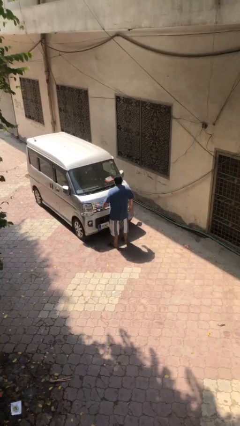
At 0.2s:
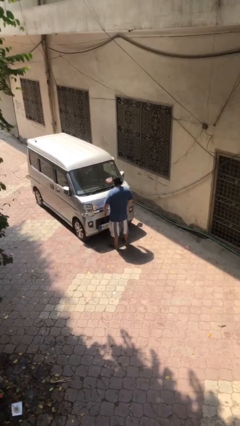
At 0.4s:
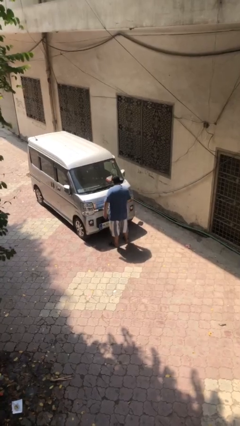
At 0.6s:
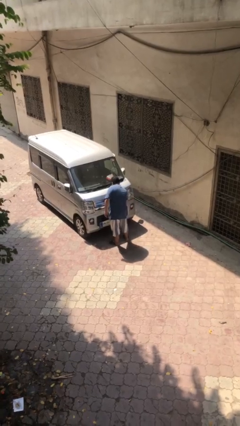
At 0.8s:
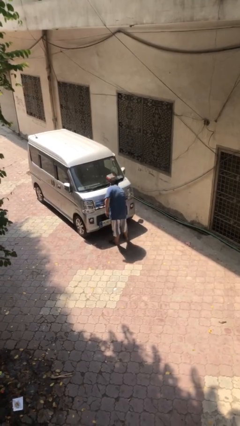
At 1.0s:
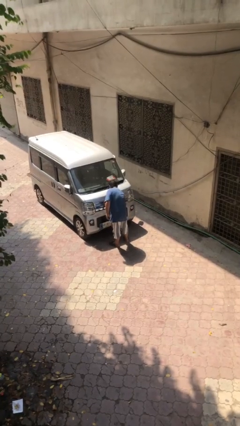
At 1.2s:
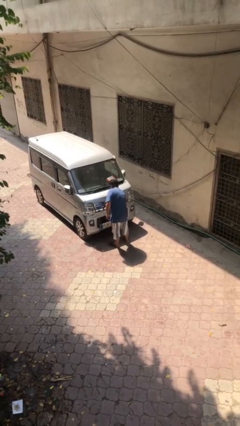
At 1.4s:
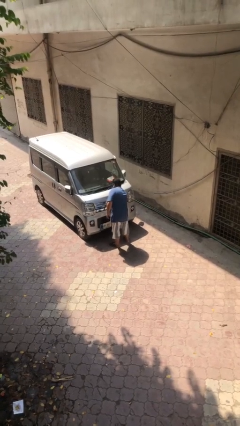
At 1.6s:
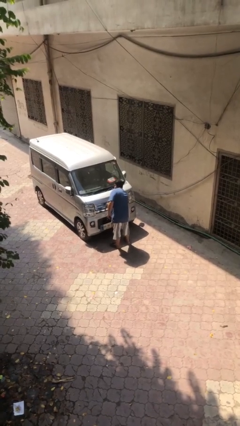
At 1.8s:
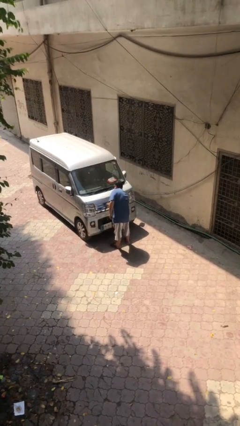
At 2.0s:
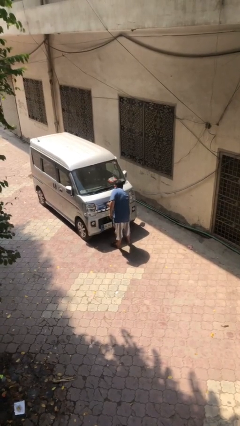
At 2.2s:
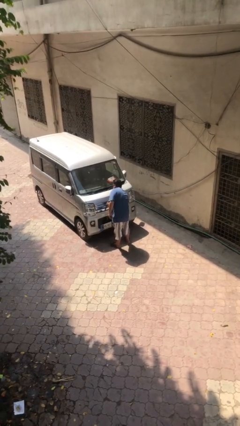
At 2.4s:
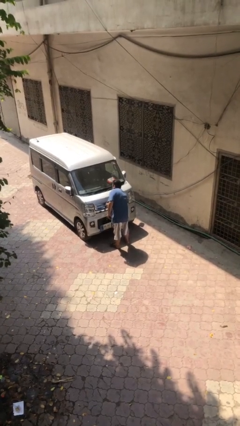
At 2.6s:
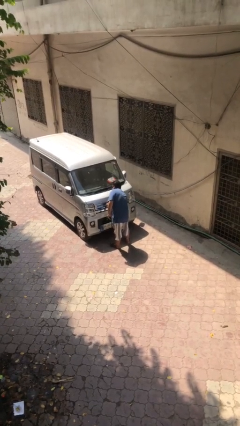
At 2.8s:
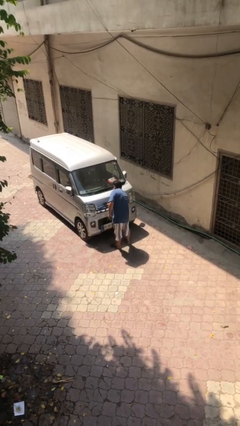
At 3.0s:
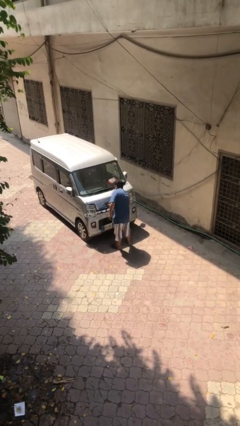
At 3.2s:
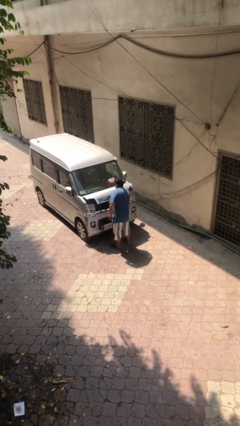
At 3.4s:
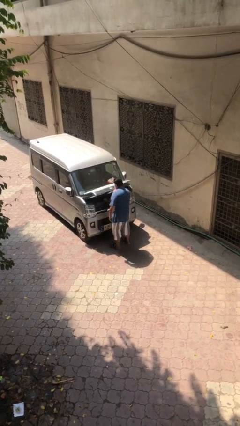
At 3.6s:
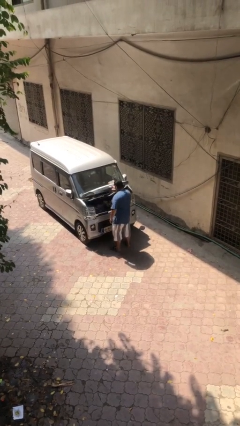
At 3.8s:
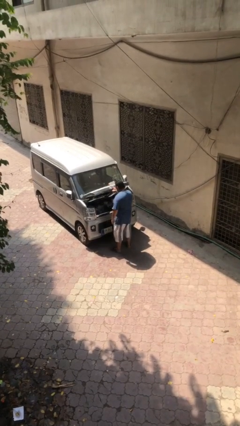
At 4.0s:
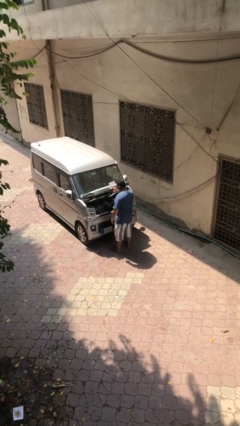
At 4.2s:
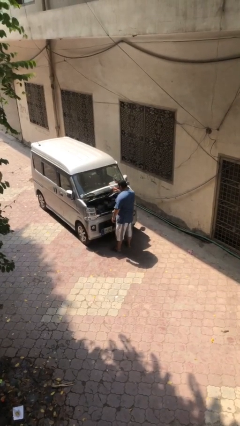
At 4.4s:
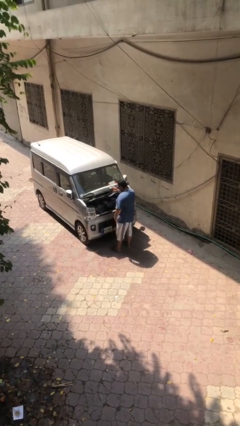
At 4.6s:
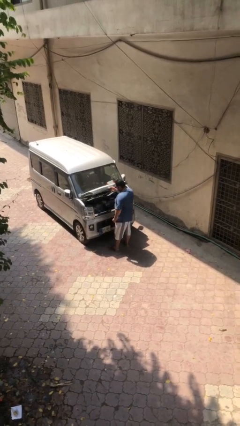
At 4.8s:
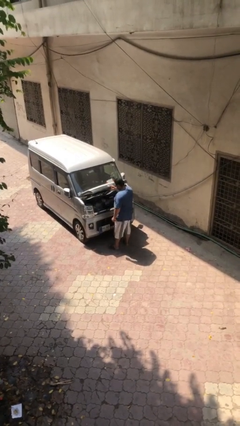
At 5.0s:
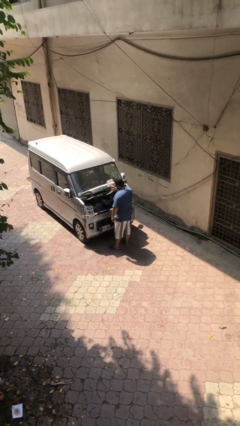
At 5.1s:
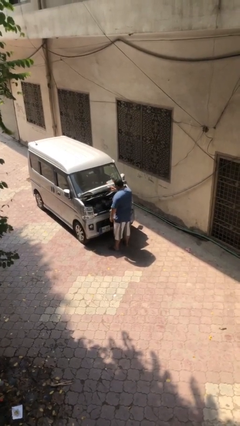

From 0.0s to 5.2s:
person opens car hood

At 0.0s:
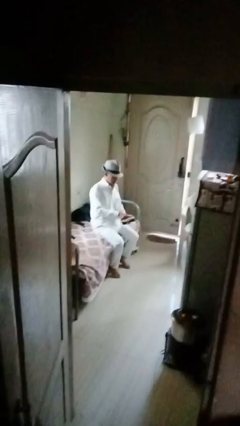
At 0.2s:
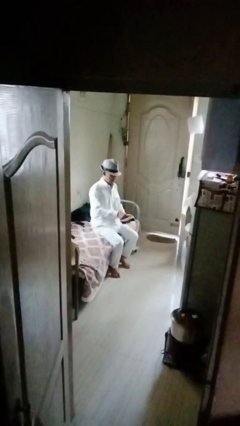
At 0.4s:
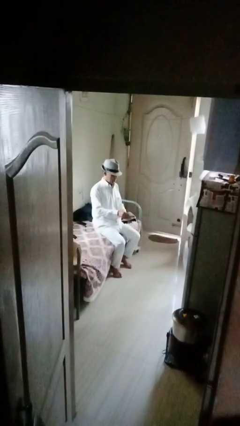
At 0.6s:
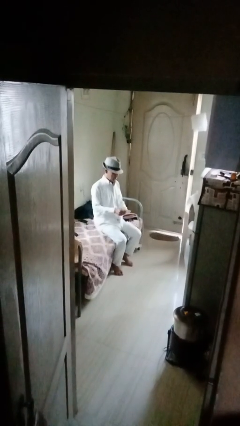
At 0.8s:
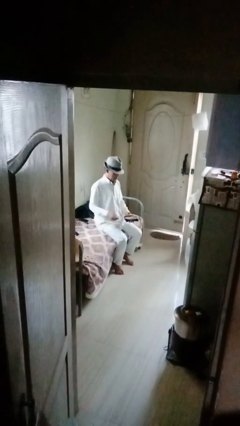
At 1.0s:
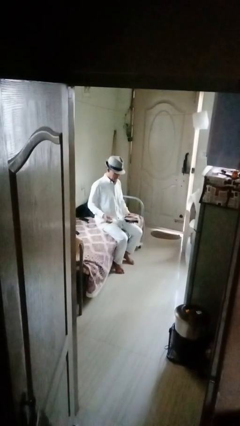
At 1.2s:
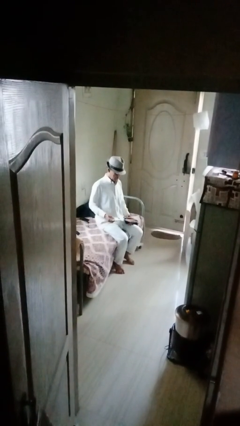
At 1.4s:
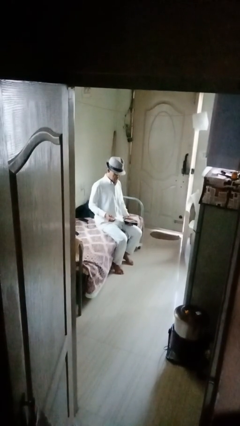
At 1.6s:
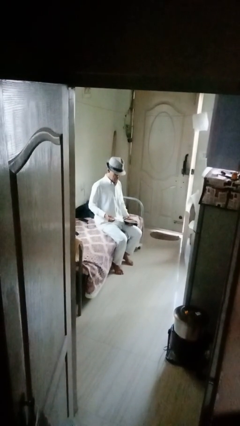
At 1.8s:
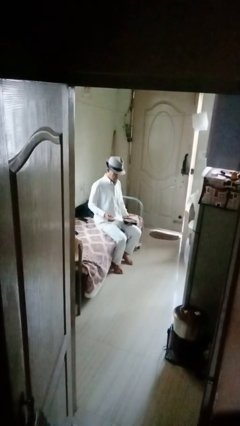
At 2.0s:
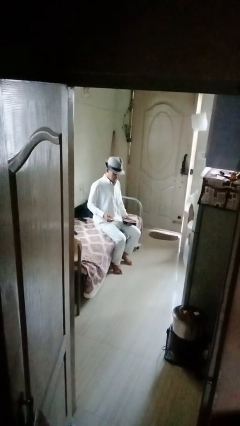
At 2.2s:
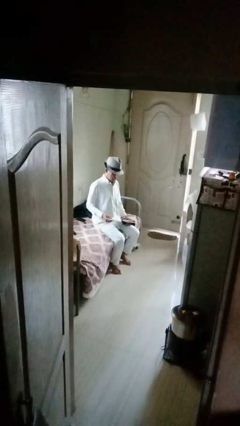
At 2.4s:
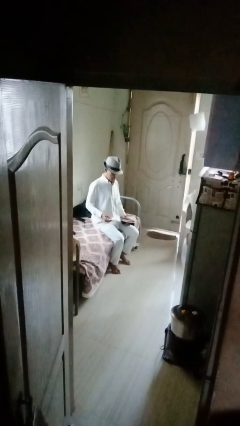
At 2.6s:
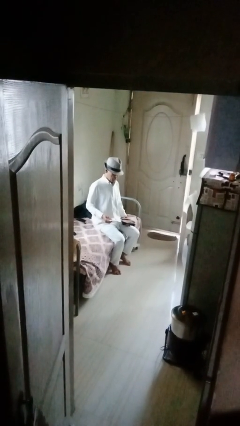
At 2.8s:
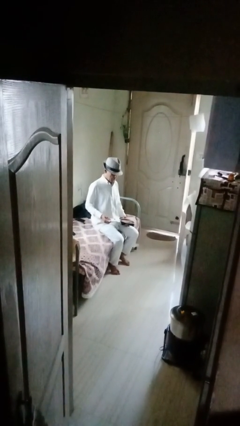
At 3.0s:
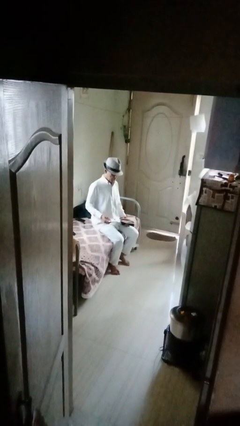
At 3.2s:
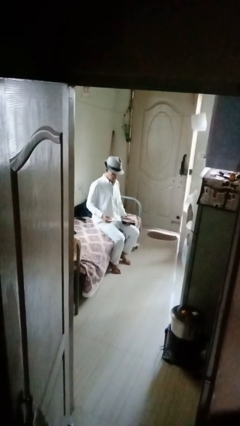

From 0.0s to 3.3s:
person takes object from purse

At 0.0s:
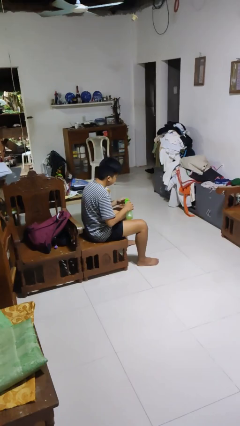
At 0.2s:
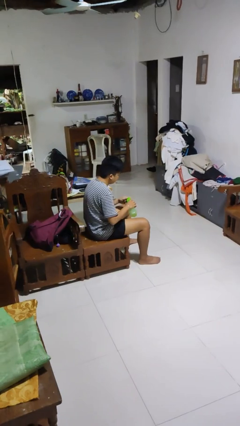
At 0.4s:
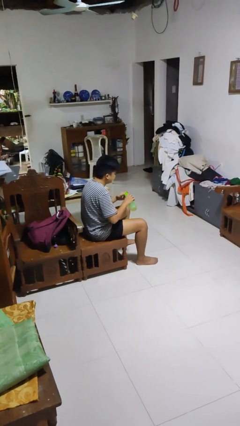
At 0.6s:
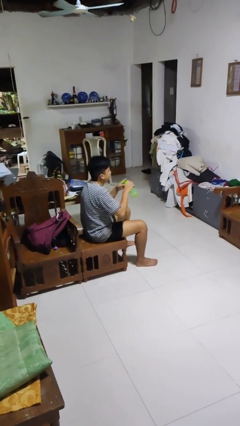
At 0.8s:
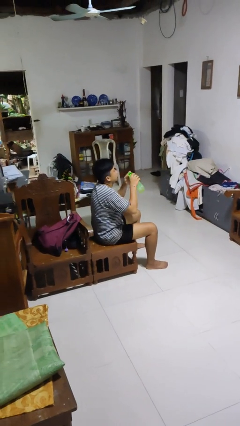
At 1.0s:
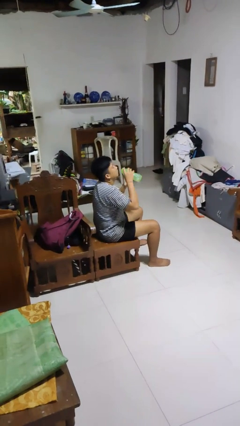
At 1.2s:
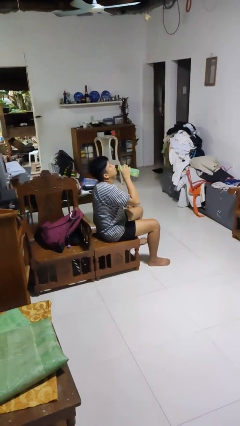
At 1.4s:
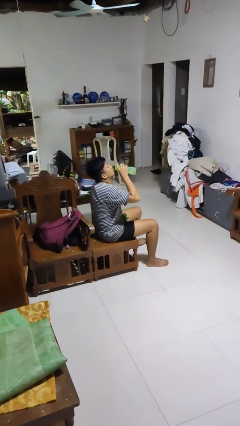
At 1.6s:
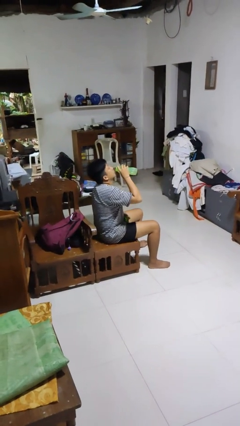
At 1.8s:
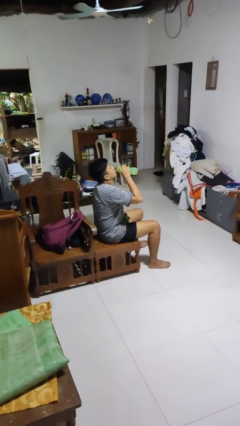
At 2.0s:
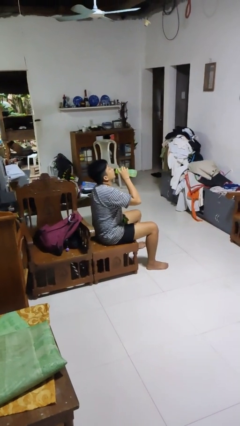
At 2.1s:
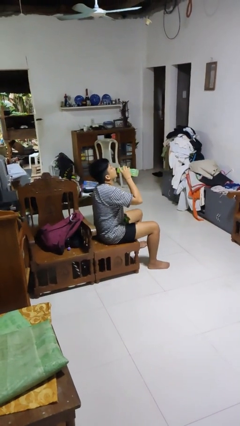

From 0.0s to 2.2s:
person drinks from bottle

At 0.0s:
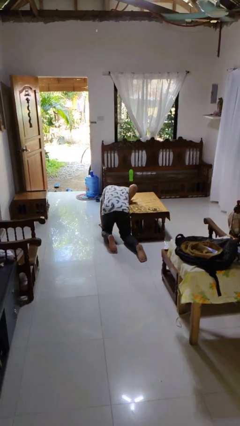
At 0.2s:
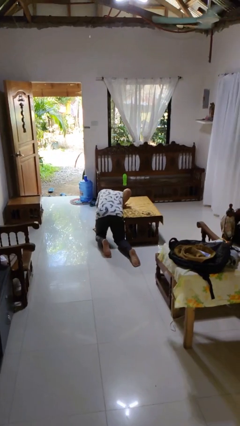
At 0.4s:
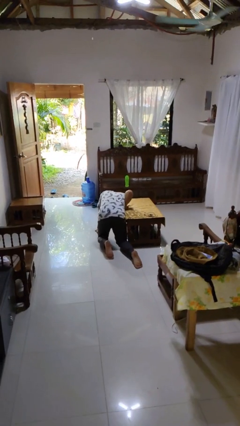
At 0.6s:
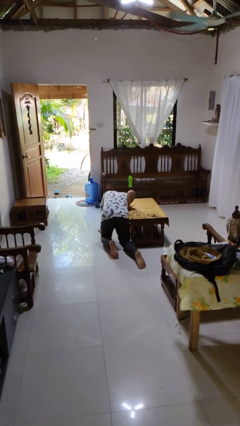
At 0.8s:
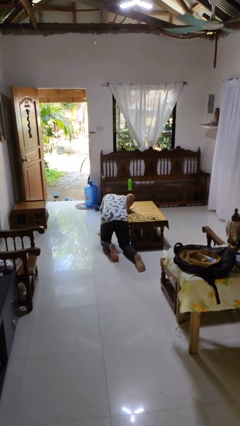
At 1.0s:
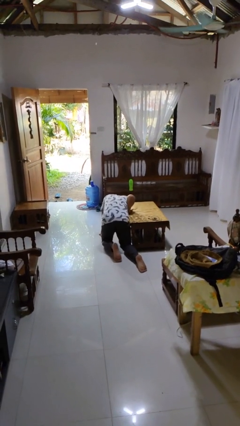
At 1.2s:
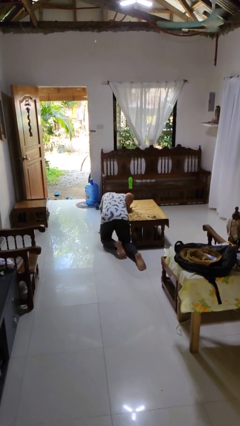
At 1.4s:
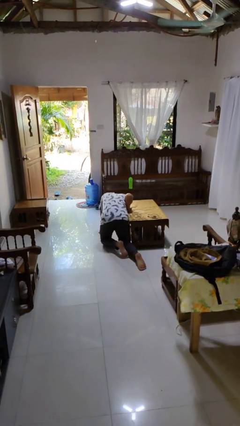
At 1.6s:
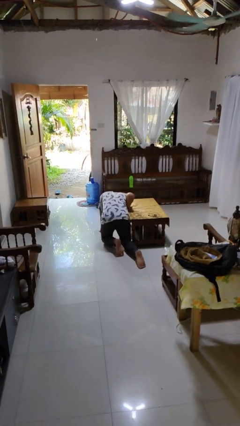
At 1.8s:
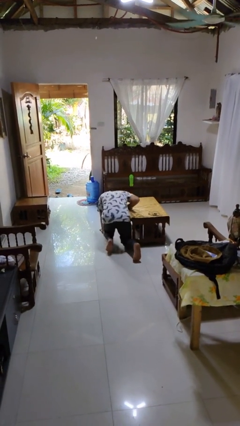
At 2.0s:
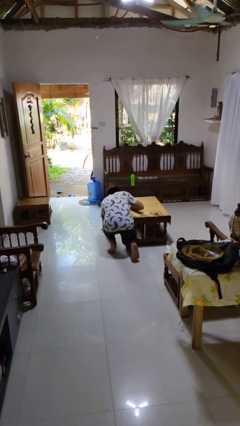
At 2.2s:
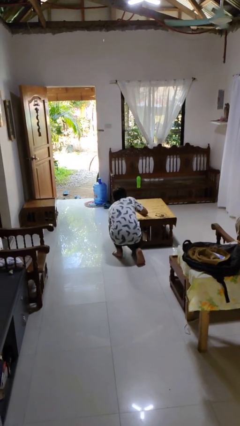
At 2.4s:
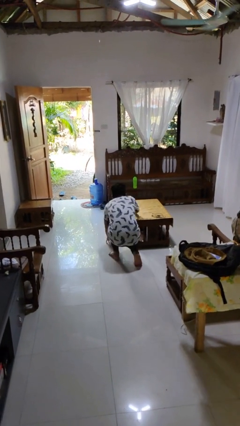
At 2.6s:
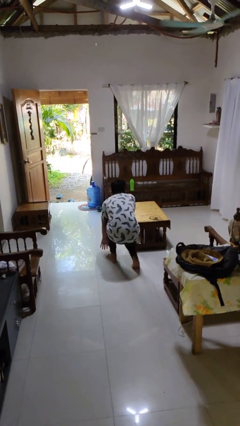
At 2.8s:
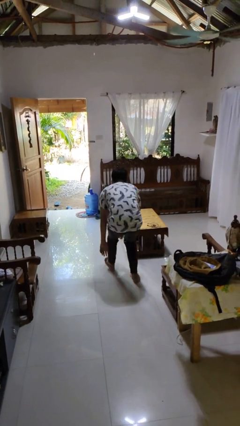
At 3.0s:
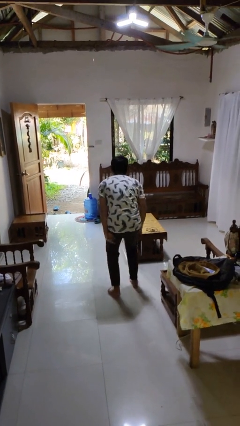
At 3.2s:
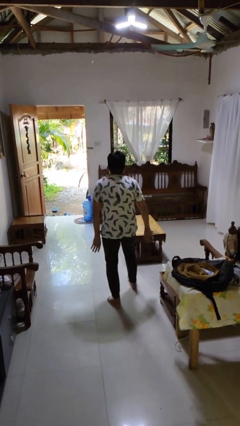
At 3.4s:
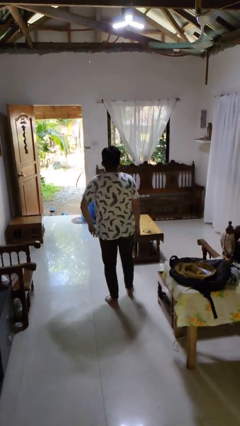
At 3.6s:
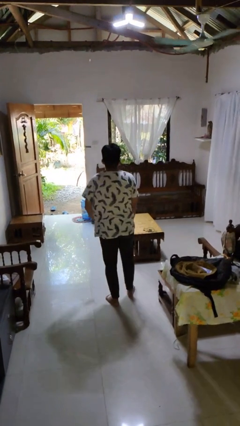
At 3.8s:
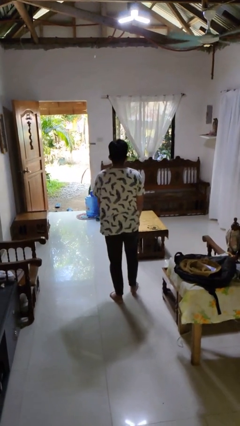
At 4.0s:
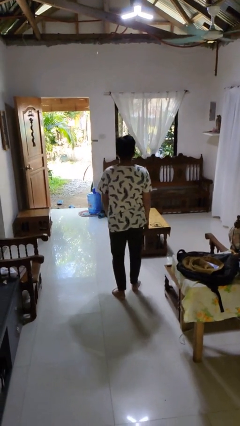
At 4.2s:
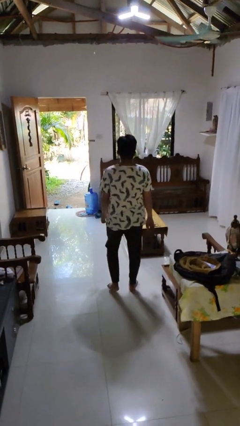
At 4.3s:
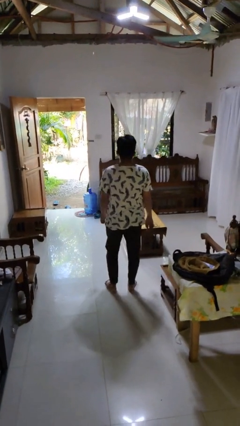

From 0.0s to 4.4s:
person stands up from floor

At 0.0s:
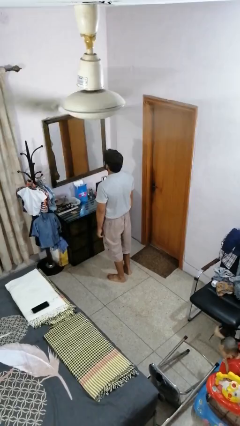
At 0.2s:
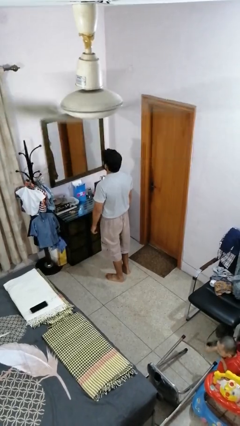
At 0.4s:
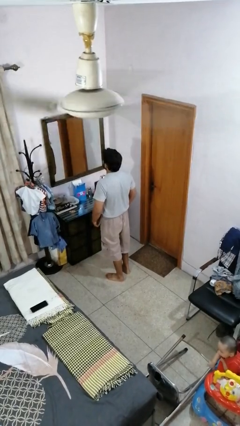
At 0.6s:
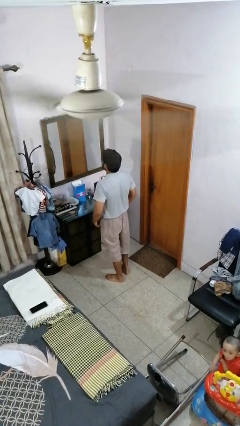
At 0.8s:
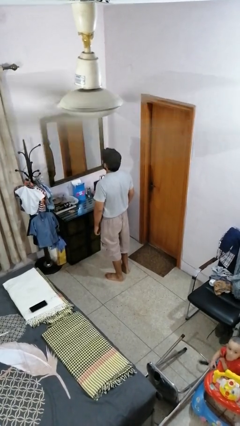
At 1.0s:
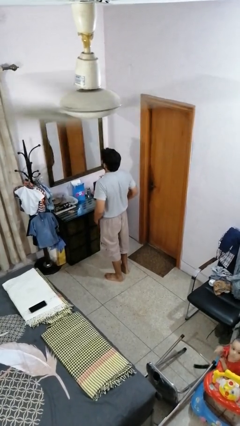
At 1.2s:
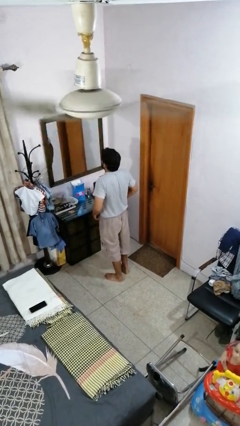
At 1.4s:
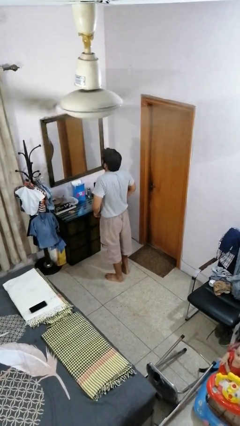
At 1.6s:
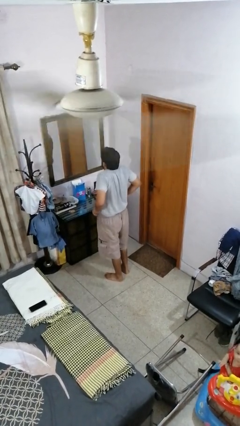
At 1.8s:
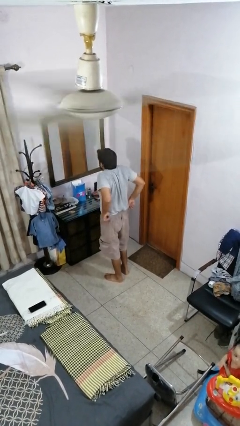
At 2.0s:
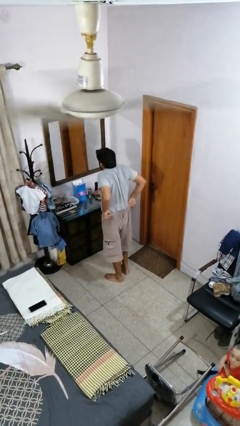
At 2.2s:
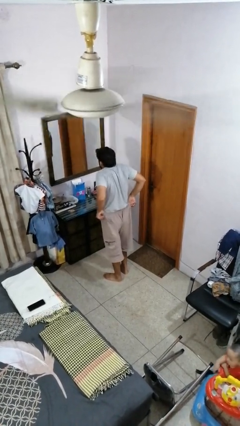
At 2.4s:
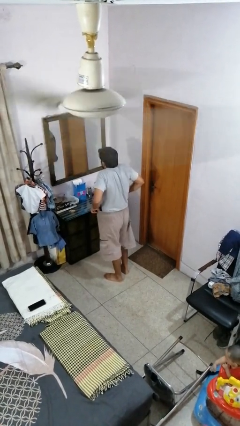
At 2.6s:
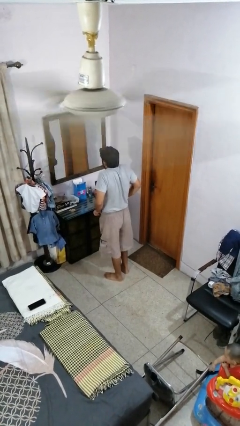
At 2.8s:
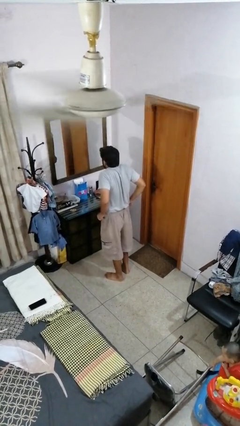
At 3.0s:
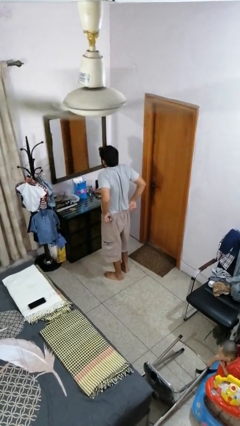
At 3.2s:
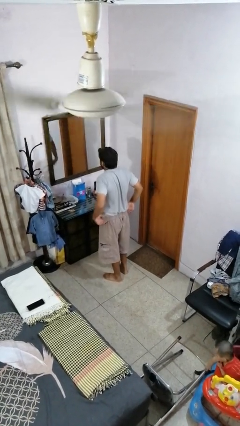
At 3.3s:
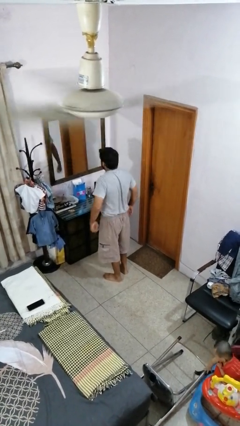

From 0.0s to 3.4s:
person hikes up pants
